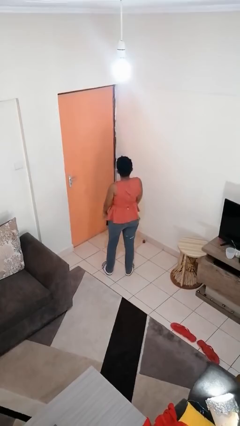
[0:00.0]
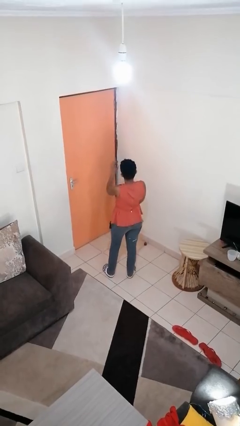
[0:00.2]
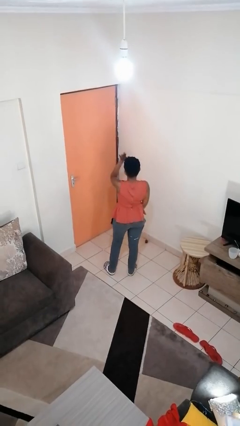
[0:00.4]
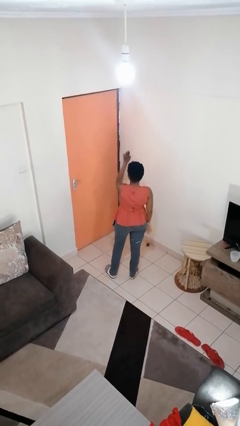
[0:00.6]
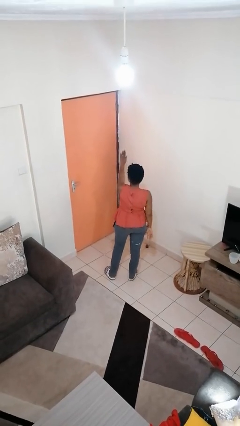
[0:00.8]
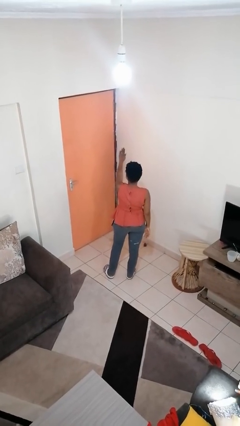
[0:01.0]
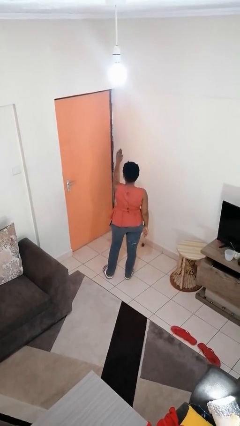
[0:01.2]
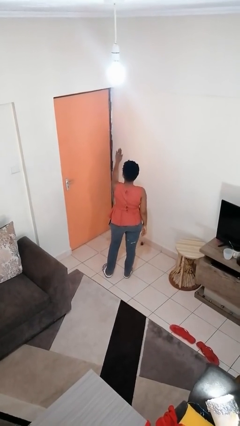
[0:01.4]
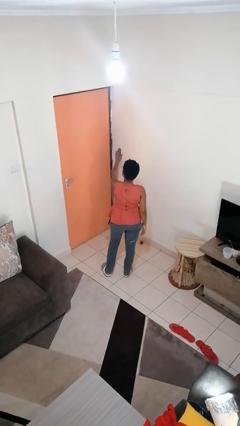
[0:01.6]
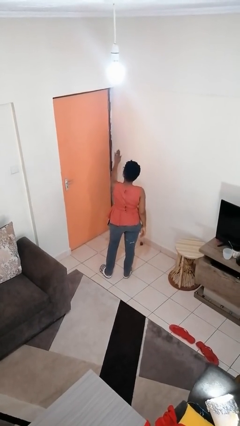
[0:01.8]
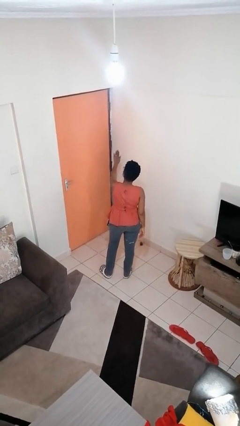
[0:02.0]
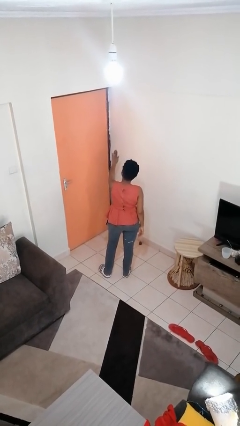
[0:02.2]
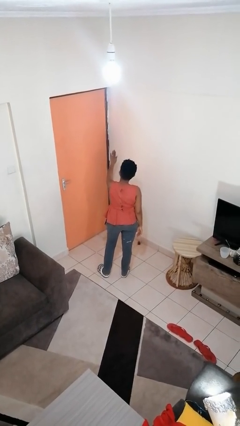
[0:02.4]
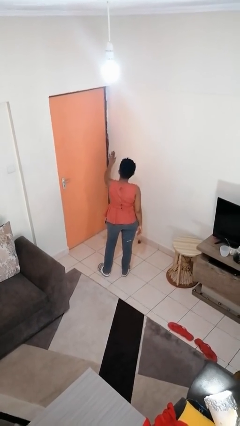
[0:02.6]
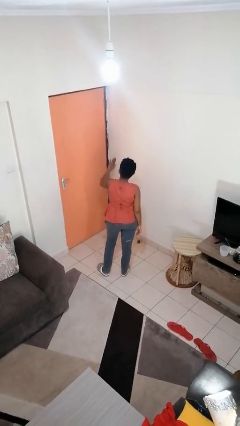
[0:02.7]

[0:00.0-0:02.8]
person gestures stop

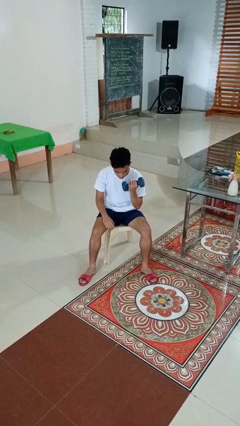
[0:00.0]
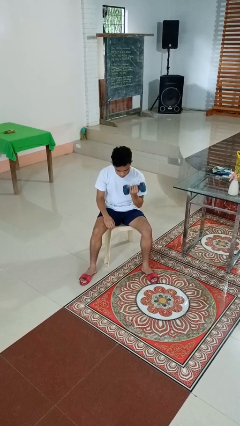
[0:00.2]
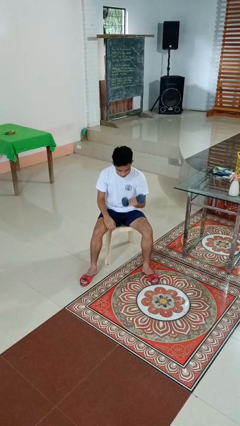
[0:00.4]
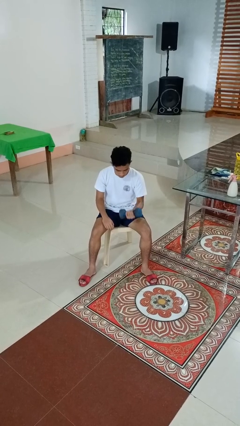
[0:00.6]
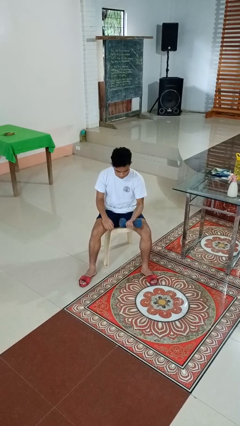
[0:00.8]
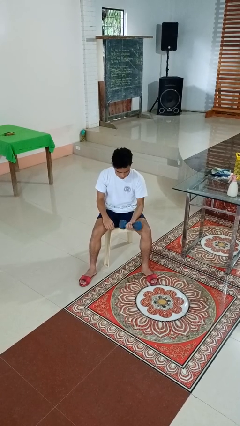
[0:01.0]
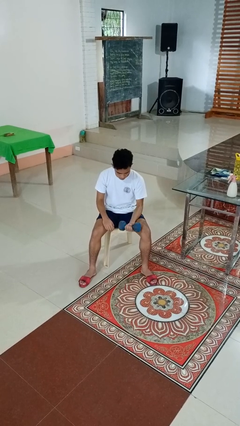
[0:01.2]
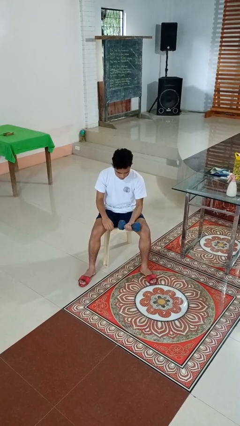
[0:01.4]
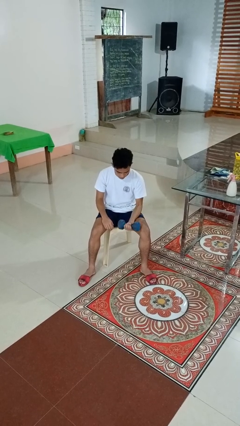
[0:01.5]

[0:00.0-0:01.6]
person lifts dumbbells

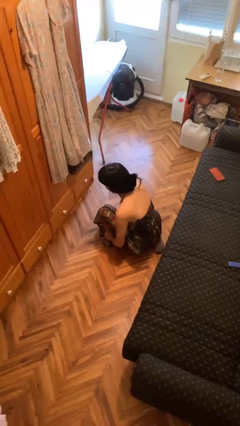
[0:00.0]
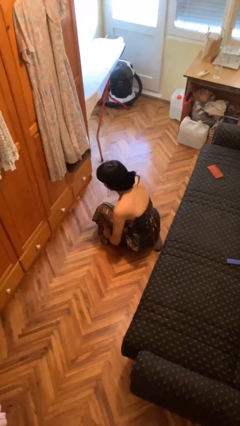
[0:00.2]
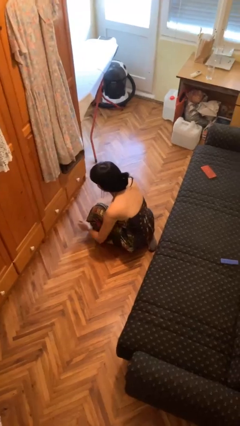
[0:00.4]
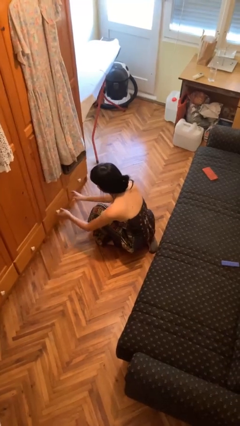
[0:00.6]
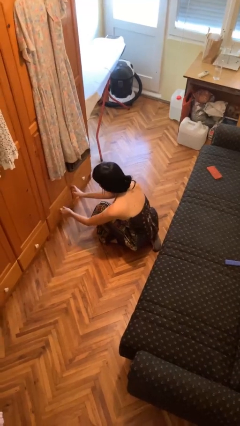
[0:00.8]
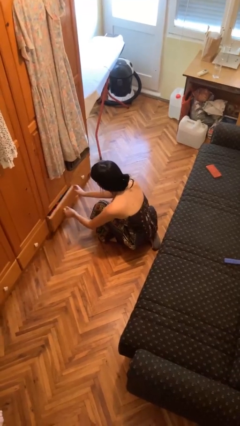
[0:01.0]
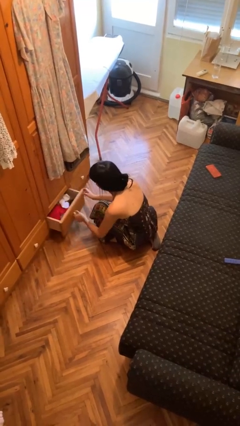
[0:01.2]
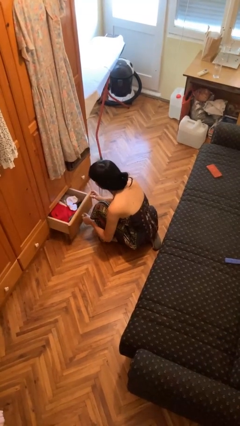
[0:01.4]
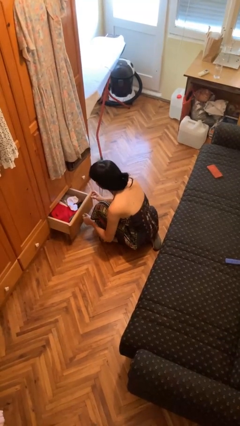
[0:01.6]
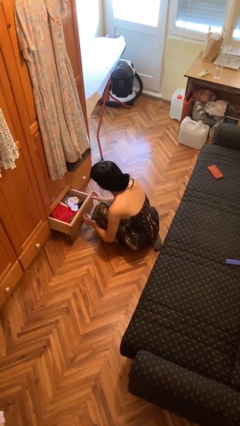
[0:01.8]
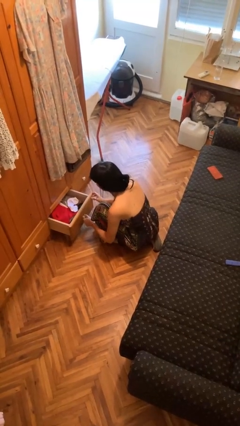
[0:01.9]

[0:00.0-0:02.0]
person opens dresser drawer

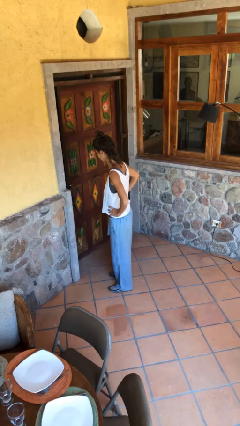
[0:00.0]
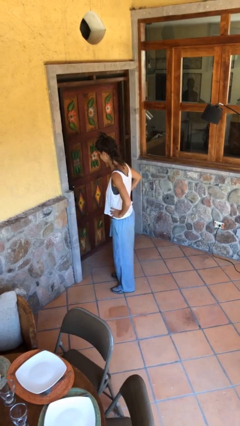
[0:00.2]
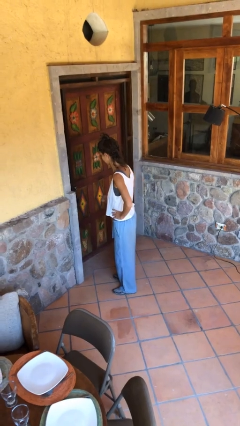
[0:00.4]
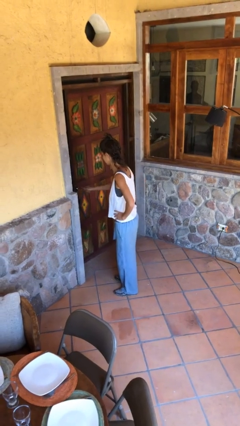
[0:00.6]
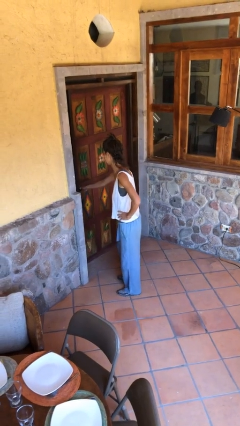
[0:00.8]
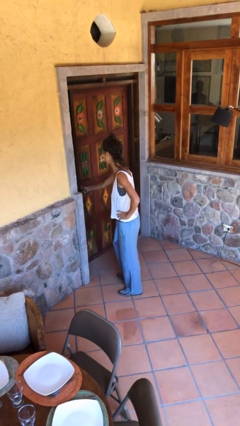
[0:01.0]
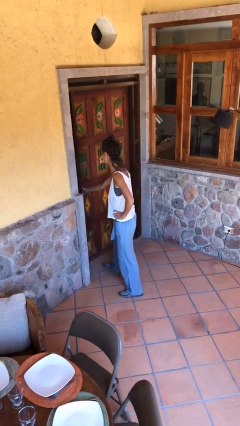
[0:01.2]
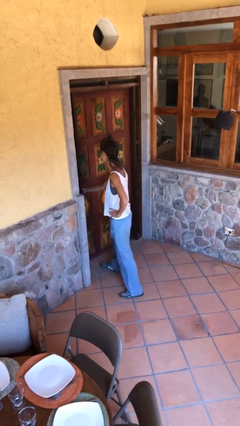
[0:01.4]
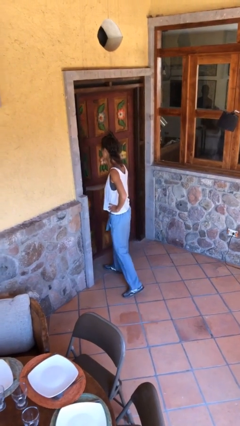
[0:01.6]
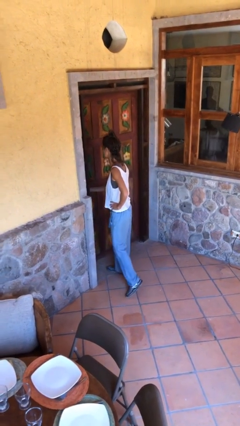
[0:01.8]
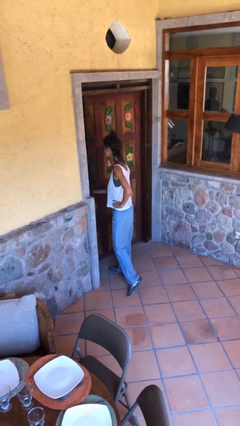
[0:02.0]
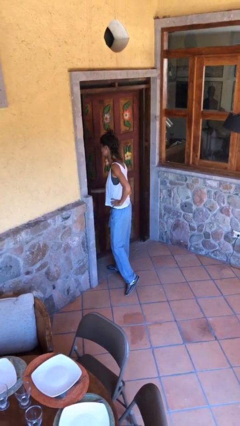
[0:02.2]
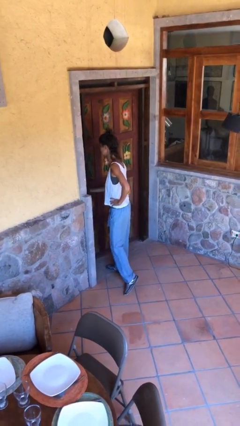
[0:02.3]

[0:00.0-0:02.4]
person opens facility door

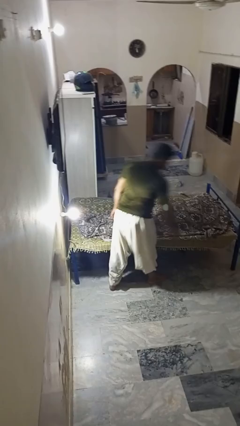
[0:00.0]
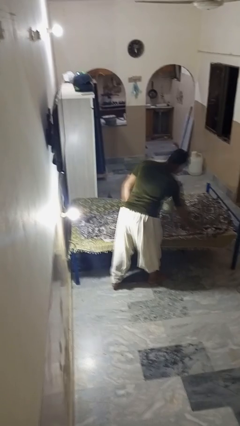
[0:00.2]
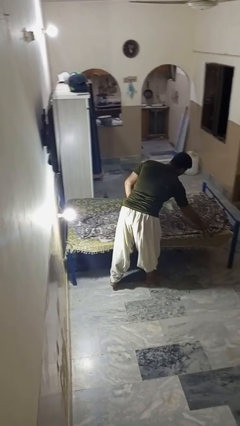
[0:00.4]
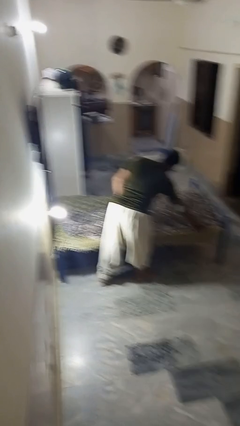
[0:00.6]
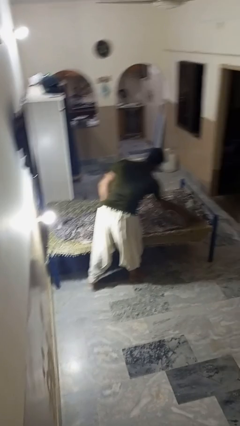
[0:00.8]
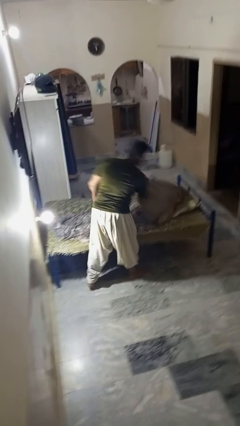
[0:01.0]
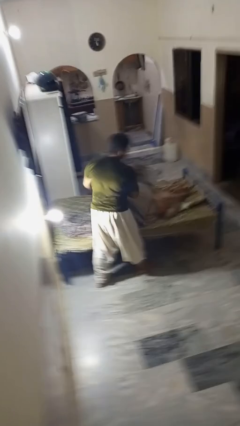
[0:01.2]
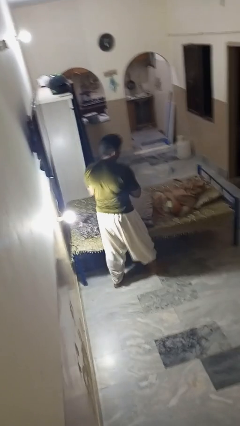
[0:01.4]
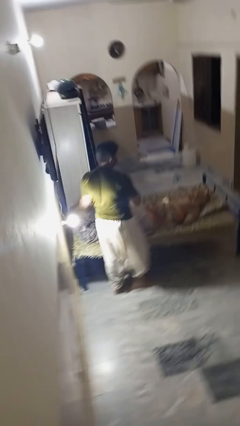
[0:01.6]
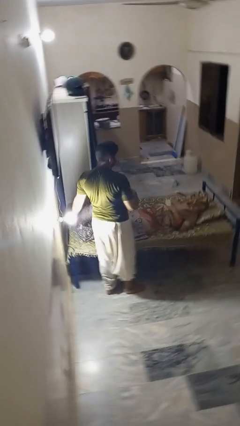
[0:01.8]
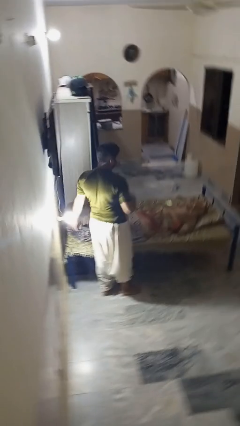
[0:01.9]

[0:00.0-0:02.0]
person uncovers friend with blanket

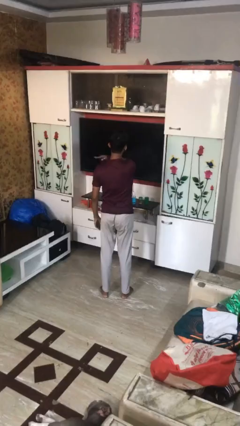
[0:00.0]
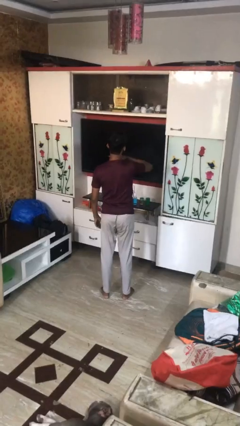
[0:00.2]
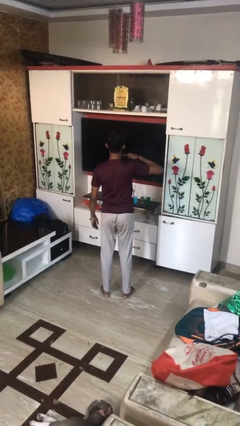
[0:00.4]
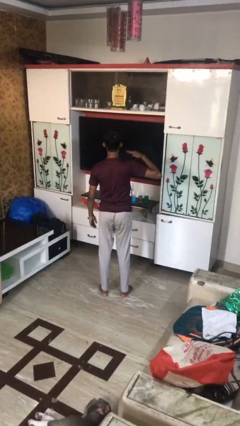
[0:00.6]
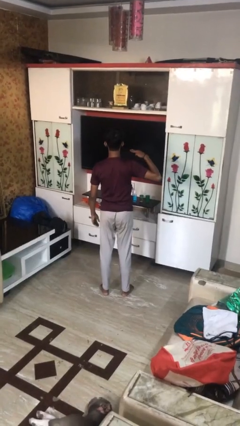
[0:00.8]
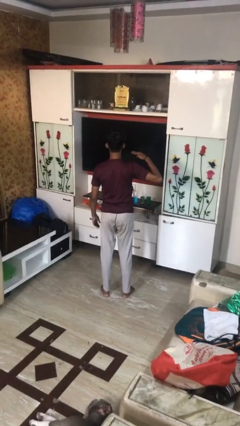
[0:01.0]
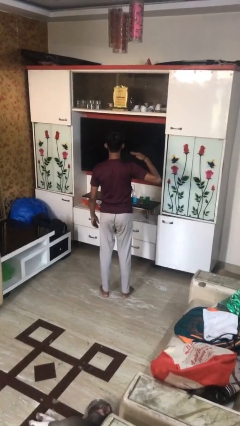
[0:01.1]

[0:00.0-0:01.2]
person gestures cut

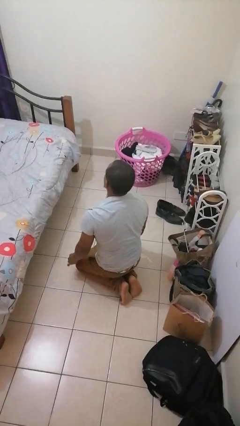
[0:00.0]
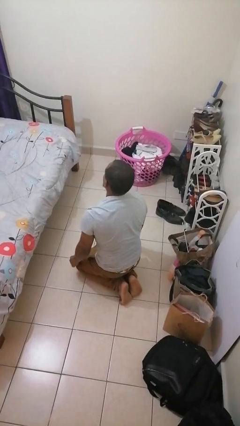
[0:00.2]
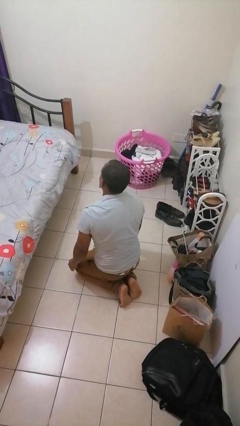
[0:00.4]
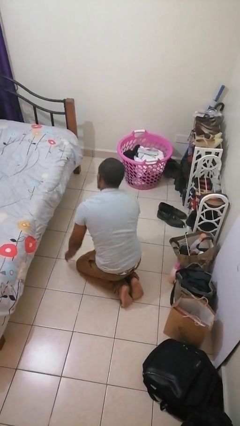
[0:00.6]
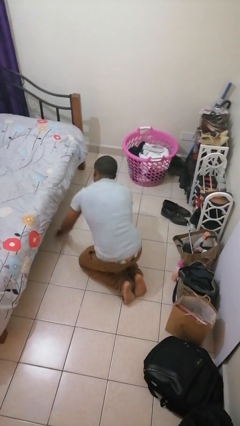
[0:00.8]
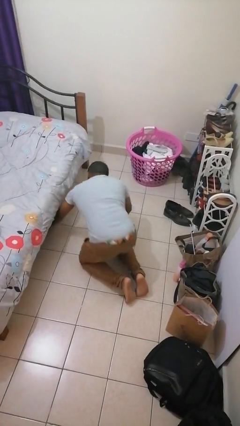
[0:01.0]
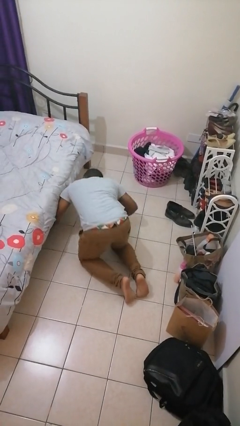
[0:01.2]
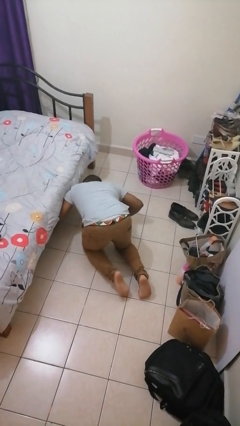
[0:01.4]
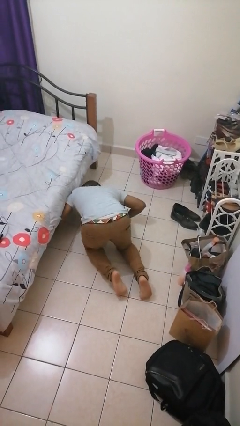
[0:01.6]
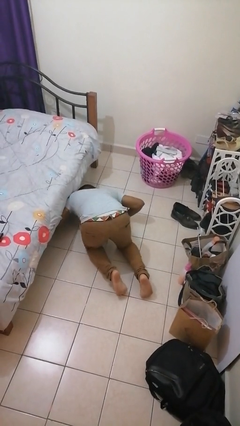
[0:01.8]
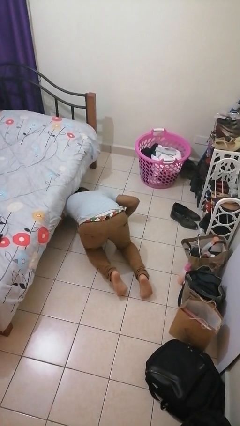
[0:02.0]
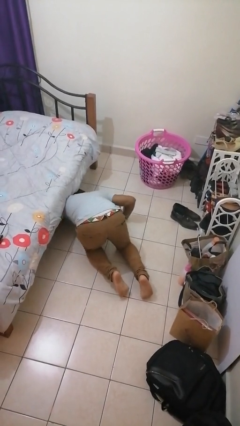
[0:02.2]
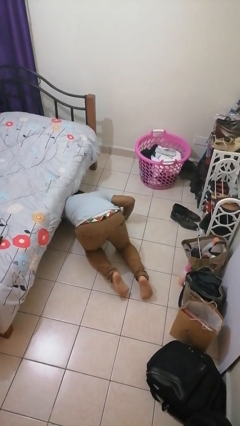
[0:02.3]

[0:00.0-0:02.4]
person searches under bed

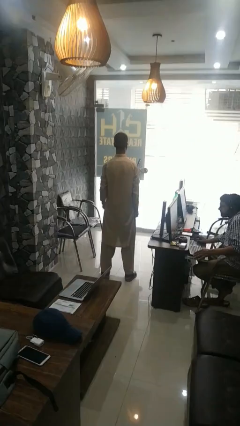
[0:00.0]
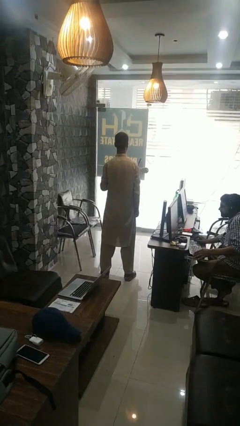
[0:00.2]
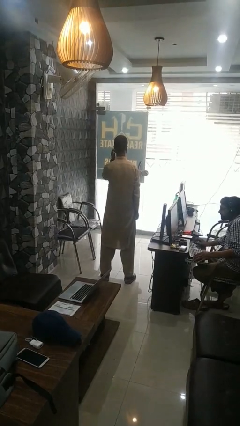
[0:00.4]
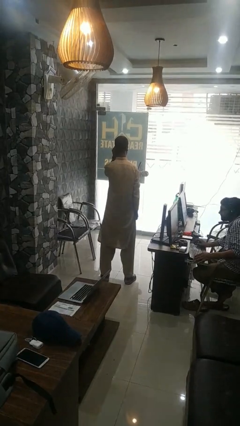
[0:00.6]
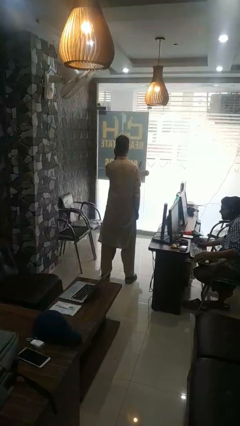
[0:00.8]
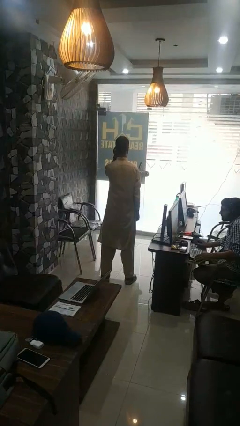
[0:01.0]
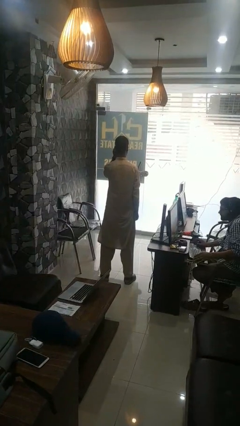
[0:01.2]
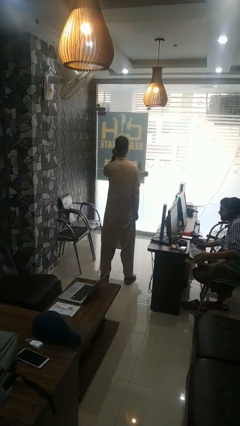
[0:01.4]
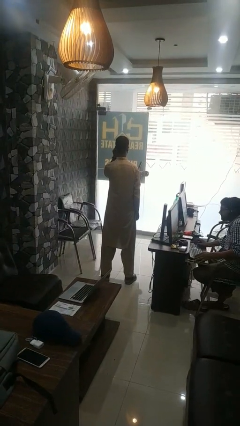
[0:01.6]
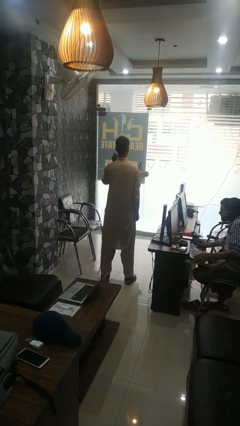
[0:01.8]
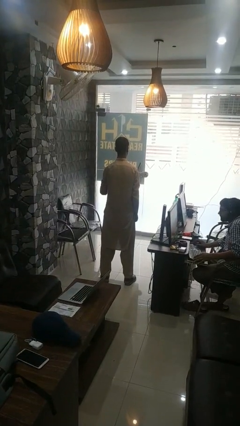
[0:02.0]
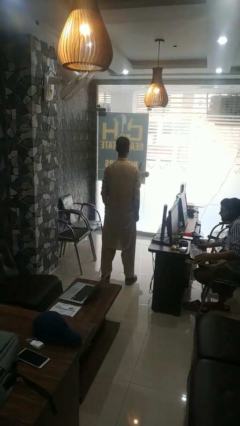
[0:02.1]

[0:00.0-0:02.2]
person touches earlobe

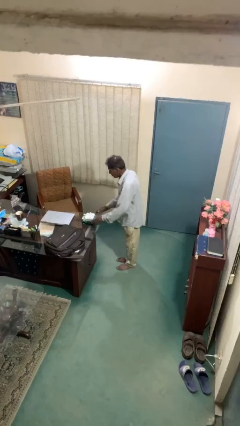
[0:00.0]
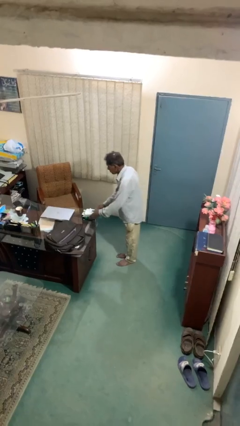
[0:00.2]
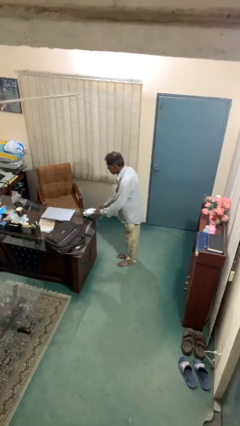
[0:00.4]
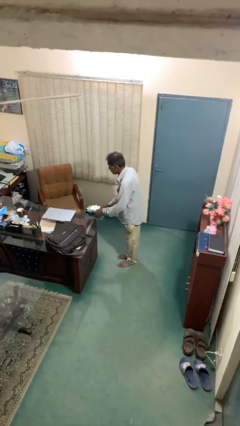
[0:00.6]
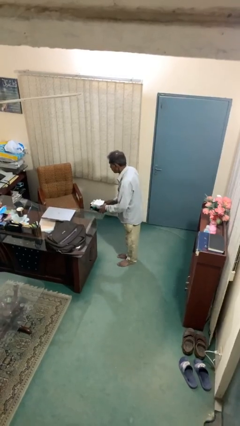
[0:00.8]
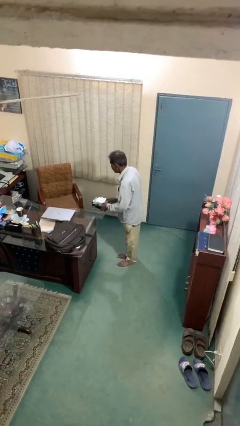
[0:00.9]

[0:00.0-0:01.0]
person picks up object from table
